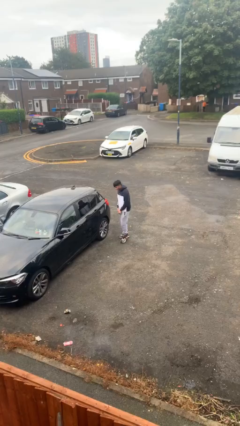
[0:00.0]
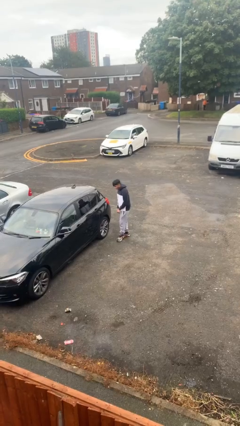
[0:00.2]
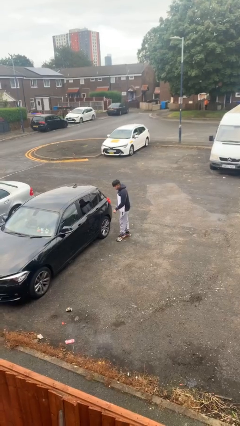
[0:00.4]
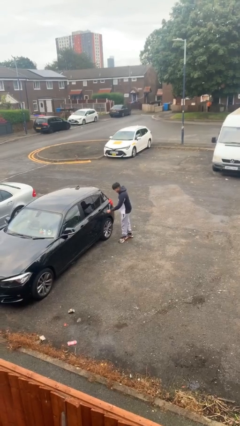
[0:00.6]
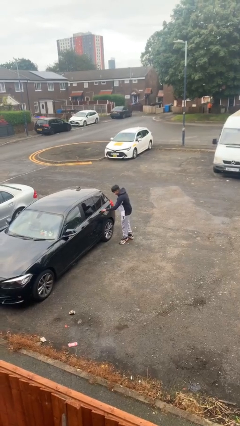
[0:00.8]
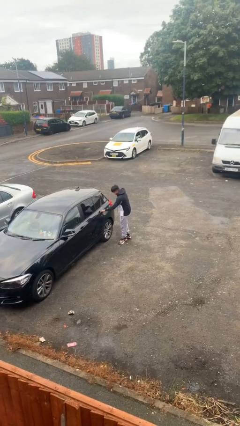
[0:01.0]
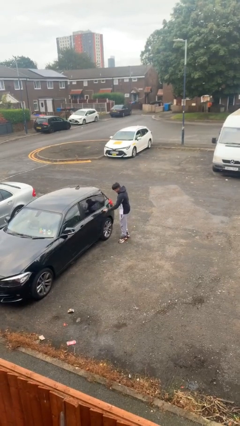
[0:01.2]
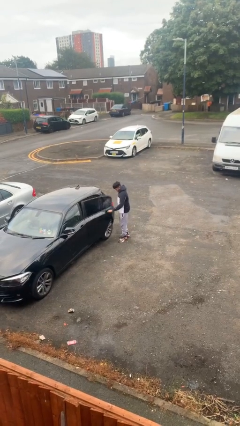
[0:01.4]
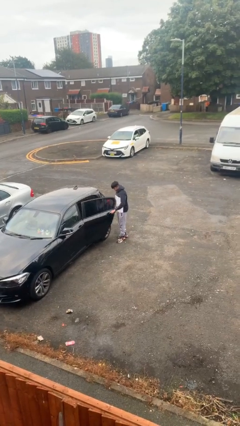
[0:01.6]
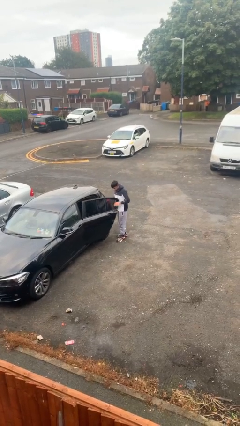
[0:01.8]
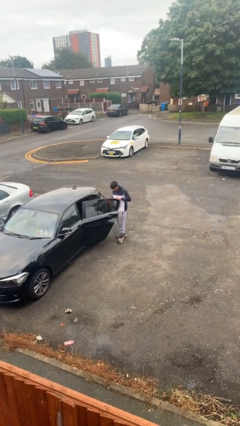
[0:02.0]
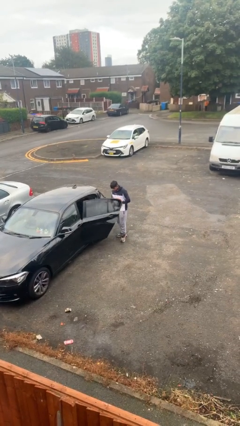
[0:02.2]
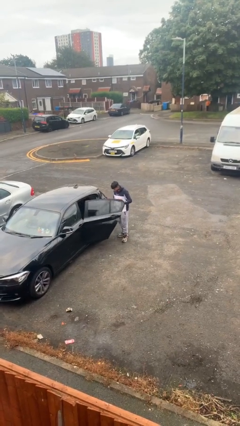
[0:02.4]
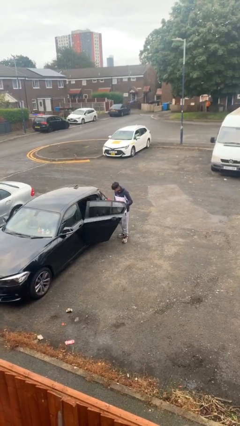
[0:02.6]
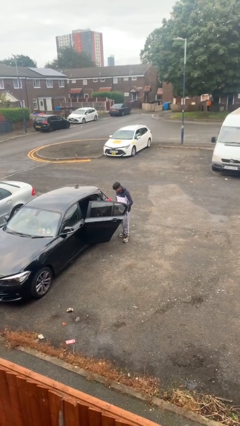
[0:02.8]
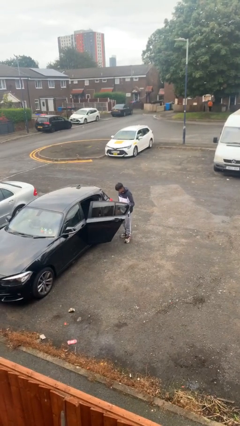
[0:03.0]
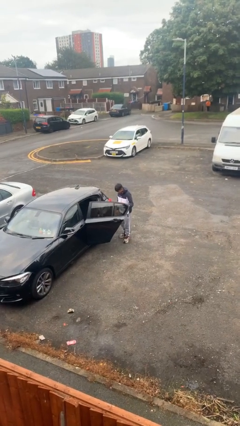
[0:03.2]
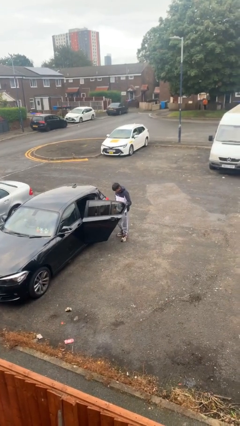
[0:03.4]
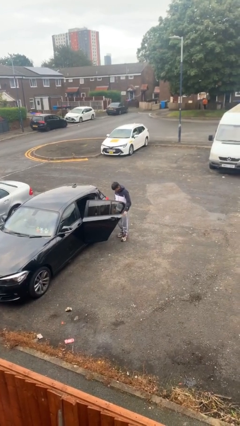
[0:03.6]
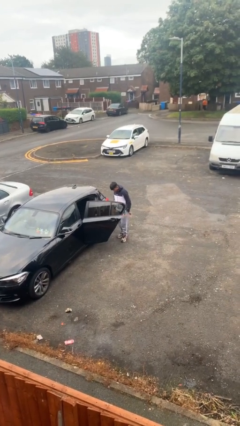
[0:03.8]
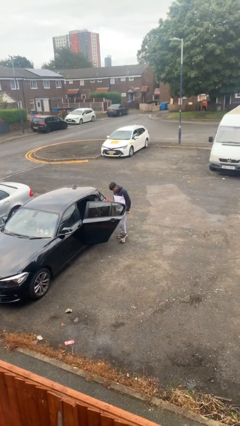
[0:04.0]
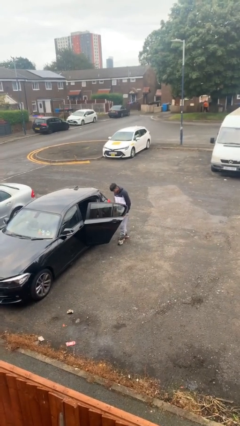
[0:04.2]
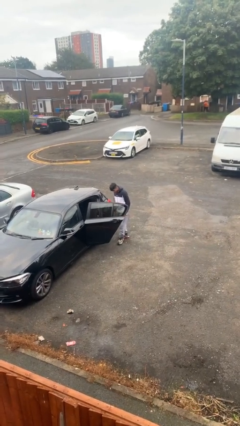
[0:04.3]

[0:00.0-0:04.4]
person opens car door

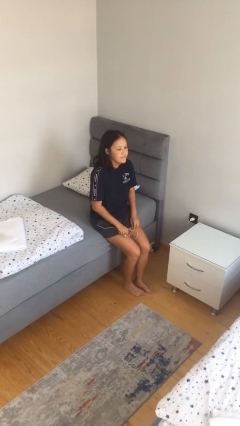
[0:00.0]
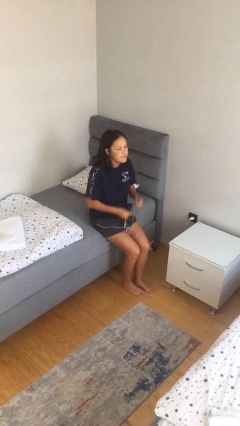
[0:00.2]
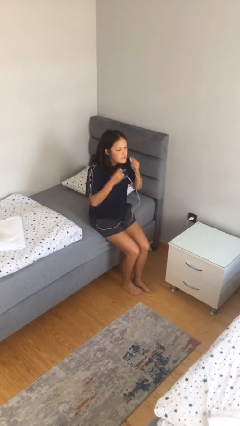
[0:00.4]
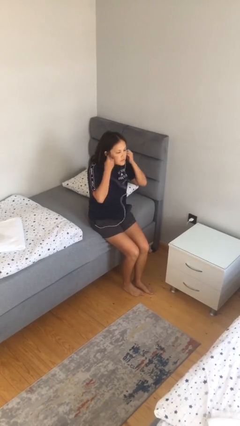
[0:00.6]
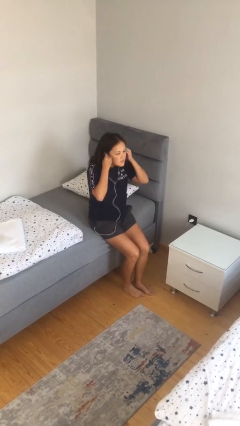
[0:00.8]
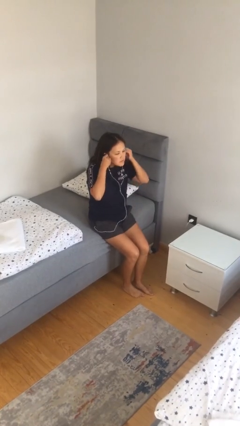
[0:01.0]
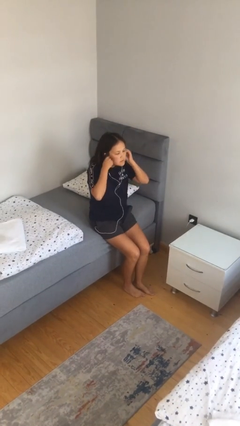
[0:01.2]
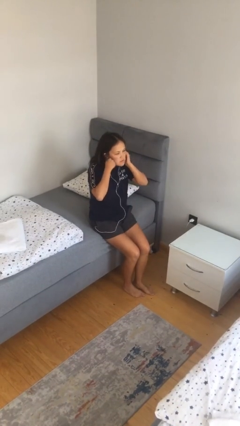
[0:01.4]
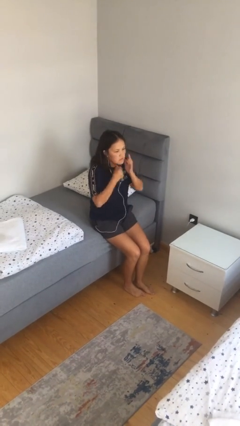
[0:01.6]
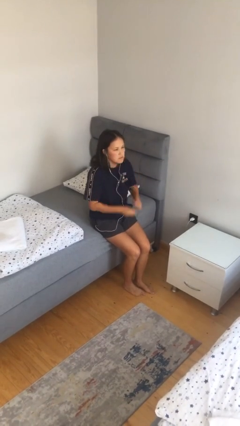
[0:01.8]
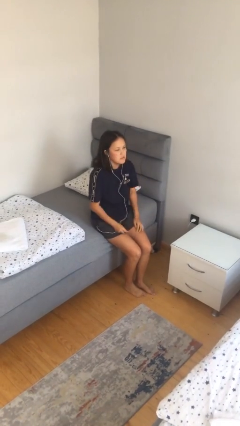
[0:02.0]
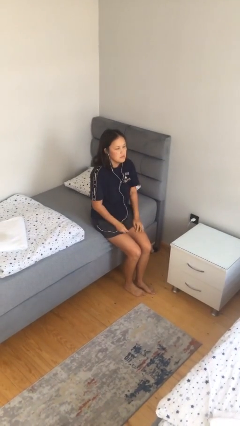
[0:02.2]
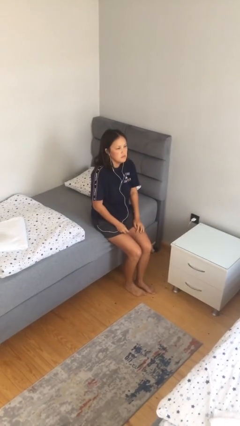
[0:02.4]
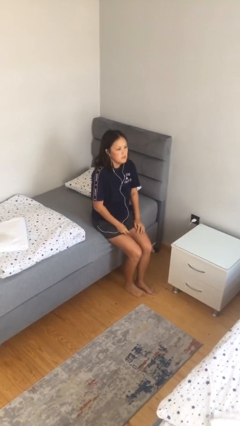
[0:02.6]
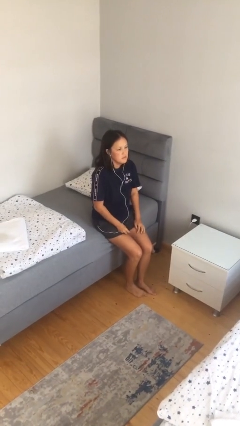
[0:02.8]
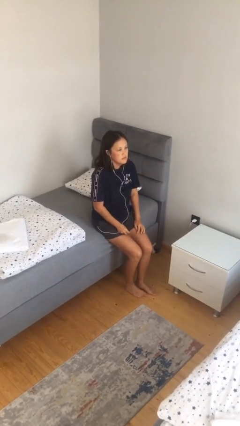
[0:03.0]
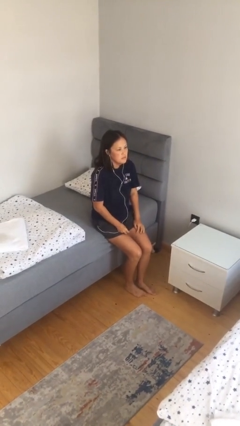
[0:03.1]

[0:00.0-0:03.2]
person puts on headphones

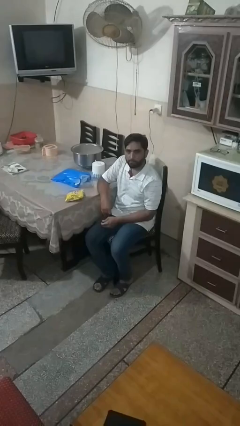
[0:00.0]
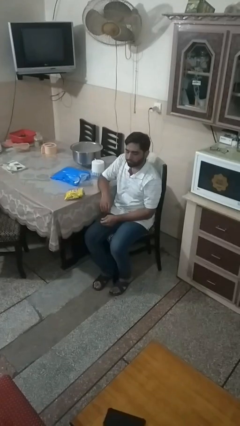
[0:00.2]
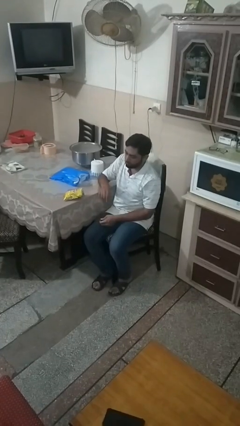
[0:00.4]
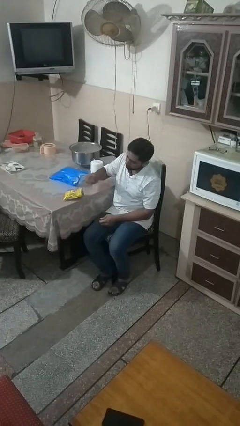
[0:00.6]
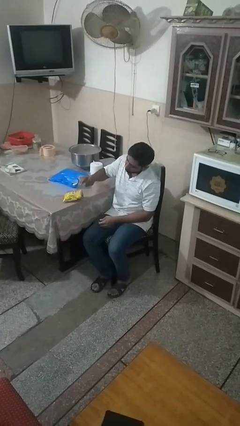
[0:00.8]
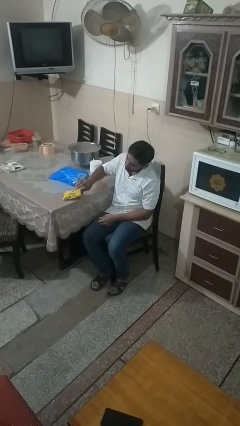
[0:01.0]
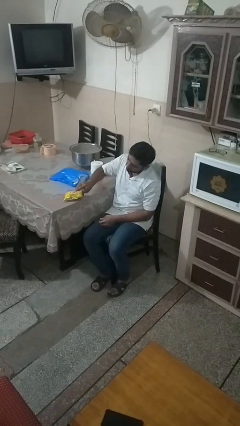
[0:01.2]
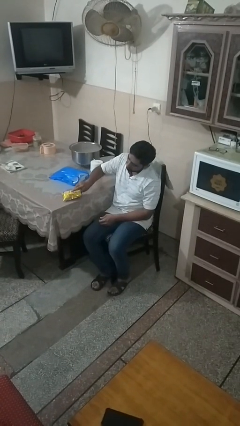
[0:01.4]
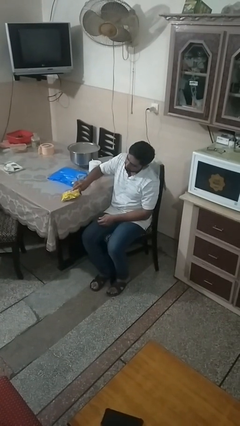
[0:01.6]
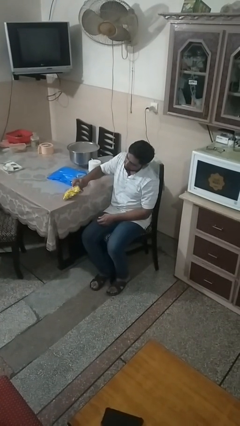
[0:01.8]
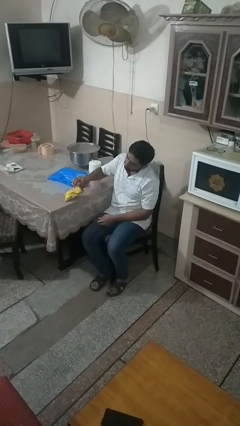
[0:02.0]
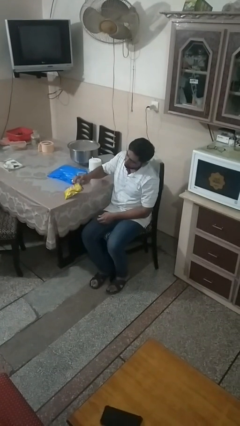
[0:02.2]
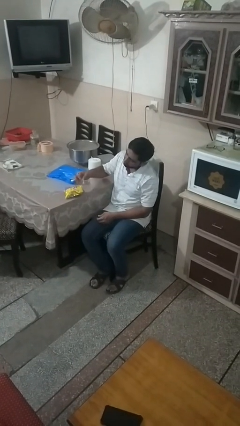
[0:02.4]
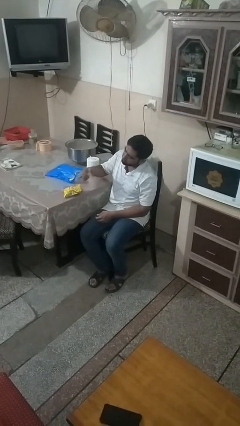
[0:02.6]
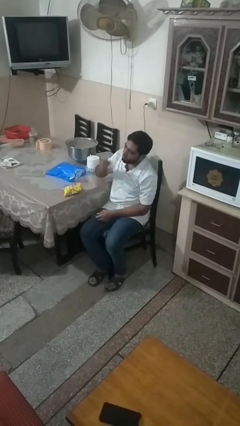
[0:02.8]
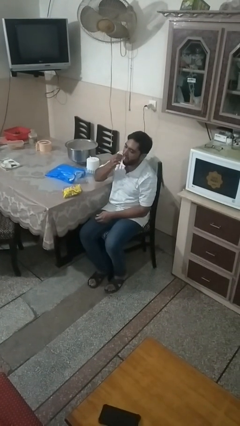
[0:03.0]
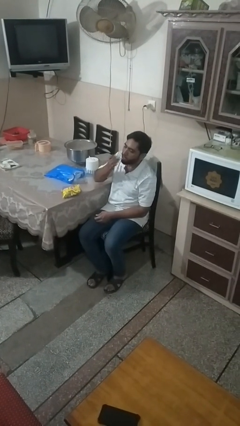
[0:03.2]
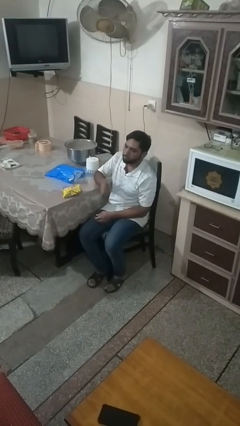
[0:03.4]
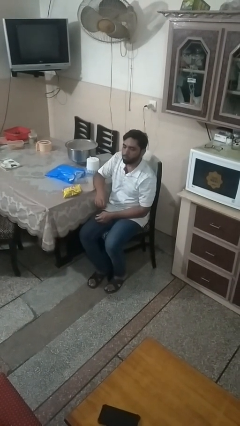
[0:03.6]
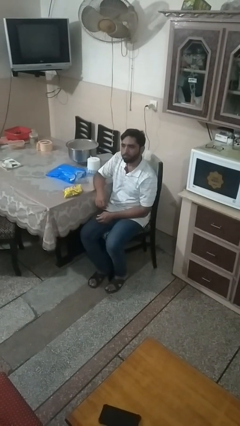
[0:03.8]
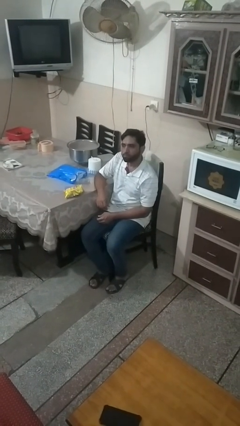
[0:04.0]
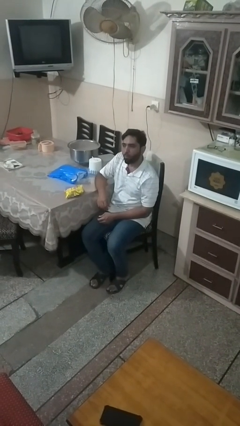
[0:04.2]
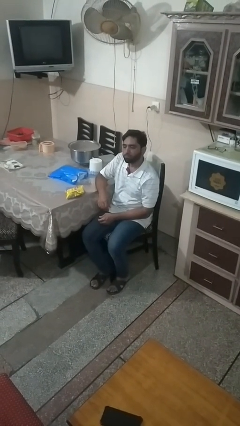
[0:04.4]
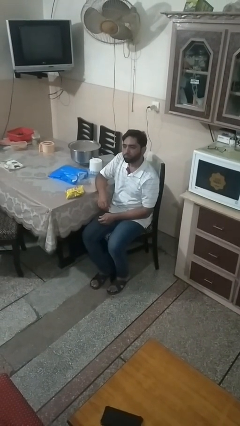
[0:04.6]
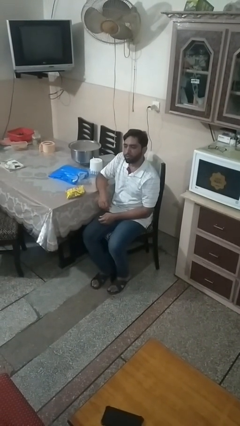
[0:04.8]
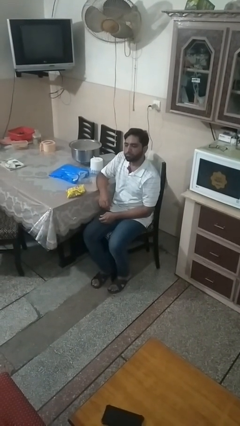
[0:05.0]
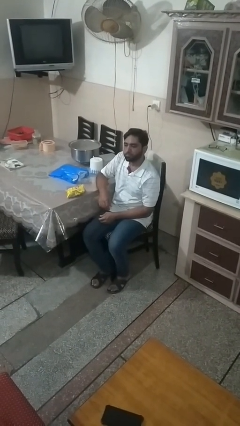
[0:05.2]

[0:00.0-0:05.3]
person eats snack from bag

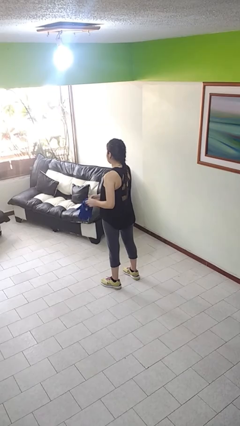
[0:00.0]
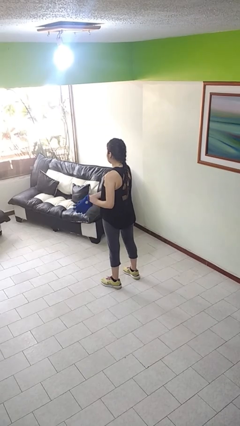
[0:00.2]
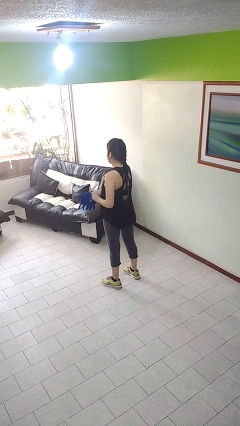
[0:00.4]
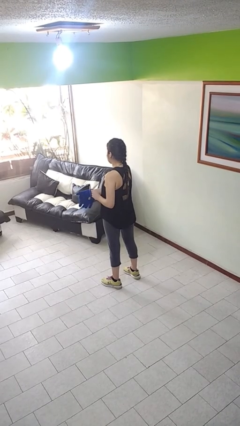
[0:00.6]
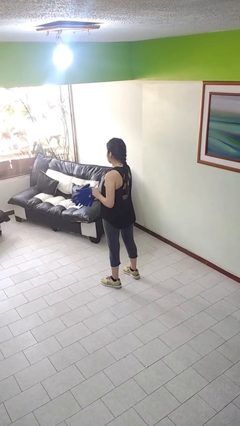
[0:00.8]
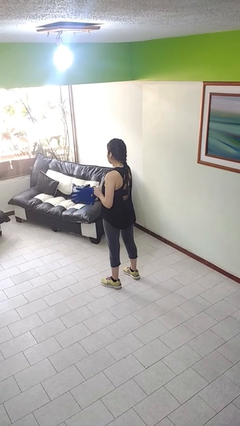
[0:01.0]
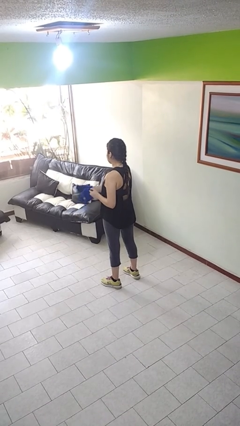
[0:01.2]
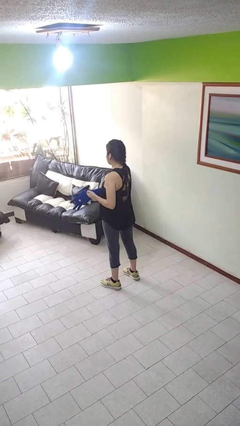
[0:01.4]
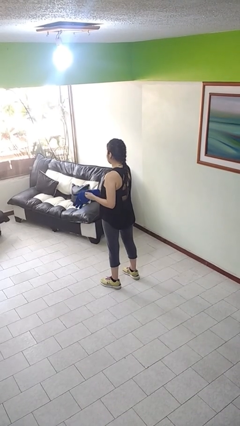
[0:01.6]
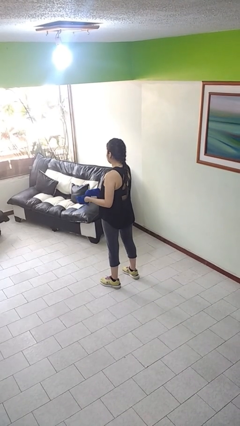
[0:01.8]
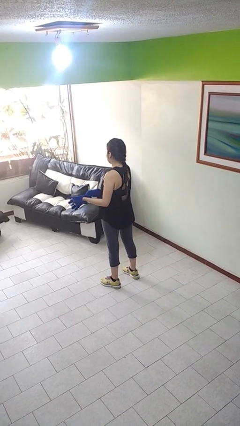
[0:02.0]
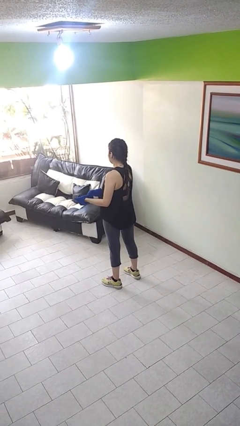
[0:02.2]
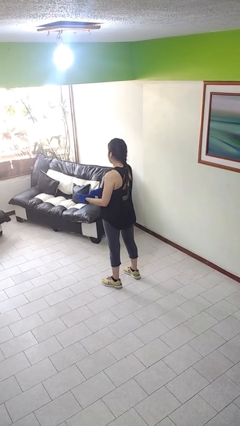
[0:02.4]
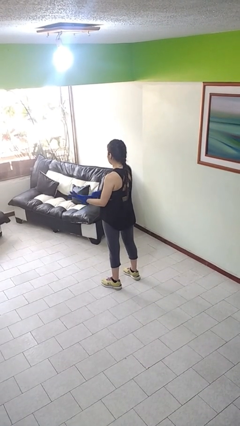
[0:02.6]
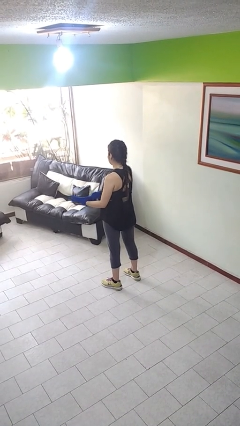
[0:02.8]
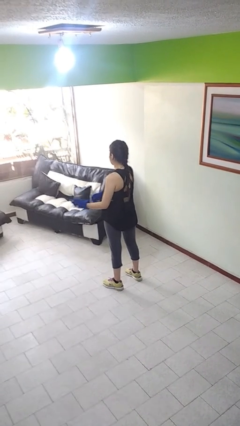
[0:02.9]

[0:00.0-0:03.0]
person puts on gloves

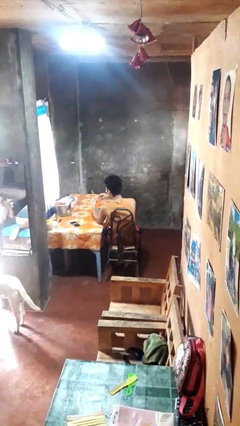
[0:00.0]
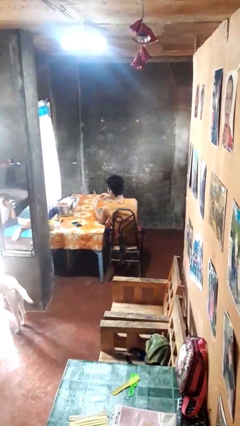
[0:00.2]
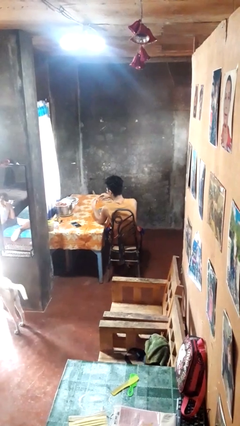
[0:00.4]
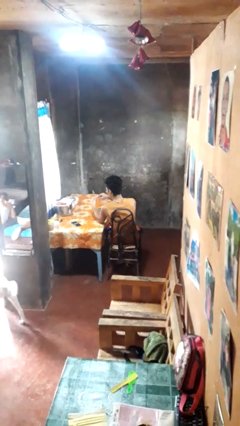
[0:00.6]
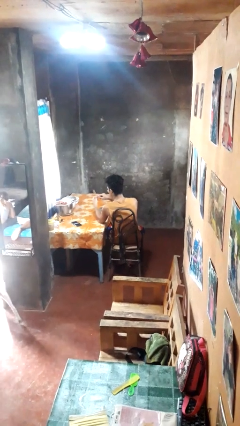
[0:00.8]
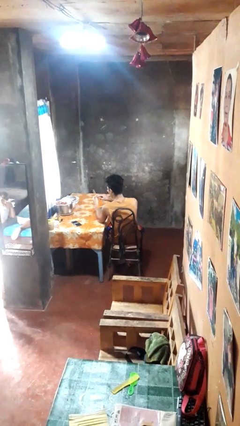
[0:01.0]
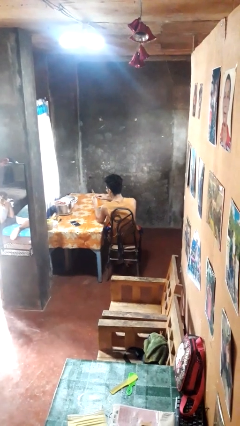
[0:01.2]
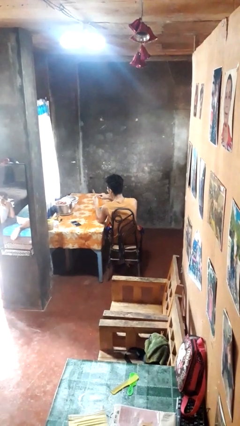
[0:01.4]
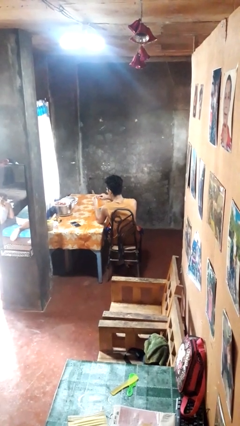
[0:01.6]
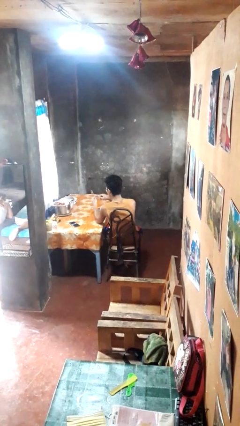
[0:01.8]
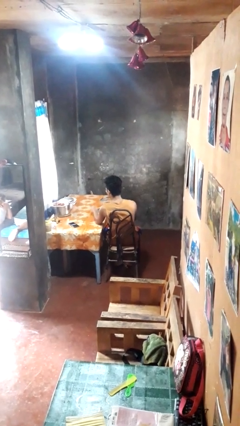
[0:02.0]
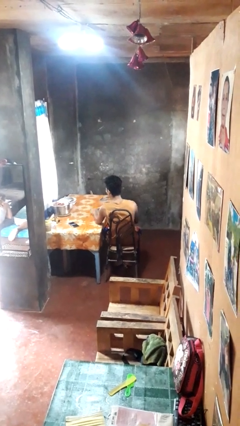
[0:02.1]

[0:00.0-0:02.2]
person files fingernails
